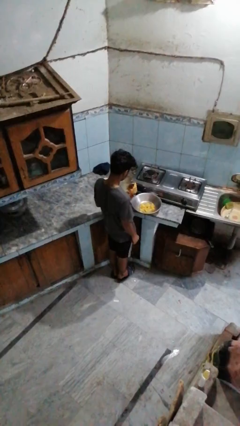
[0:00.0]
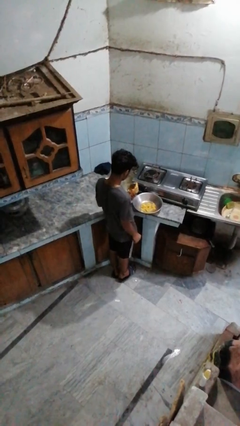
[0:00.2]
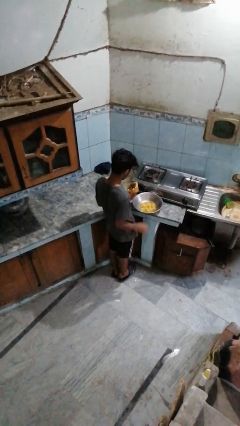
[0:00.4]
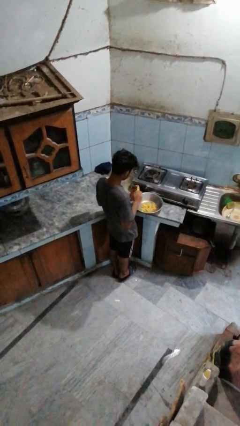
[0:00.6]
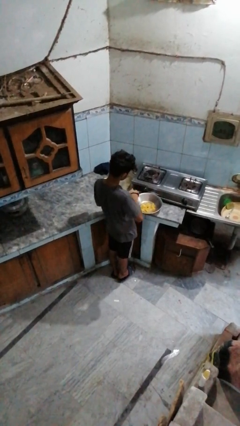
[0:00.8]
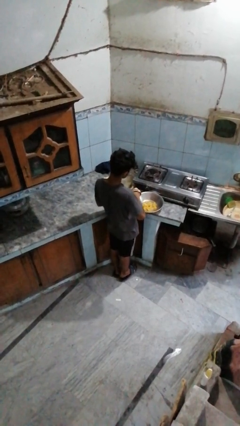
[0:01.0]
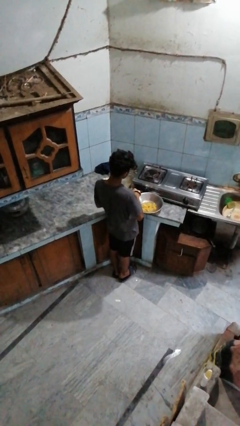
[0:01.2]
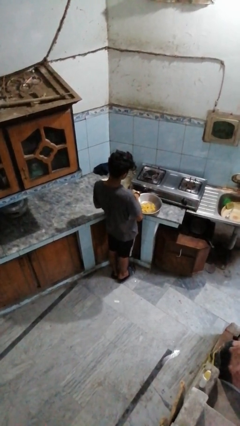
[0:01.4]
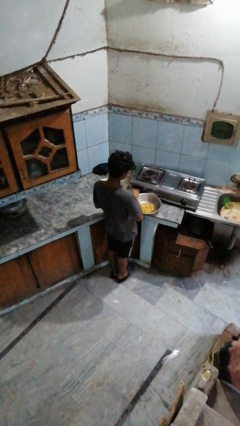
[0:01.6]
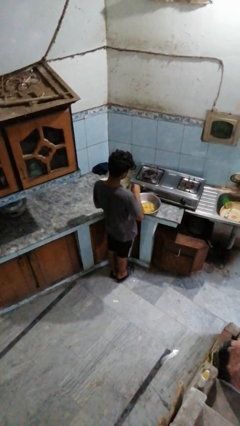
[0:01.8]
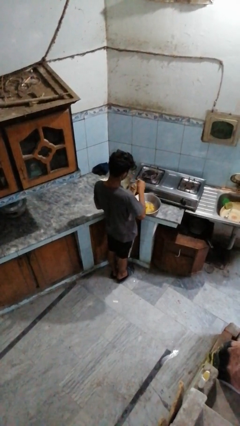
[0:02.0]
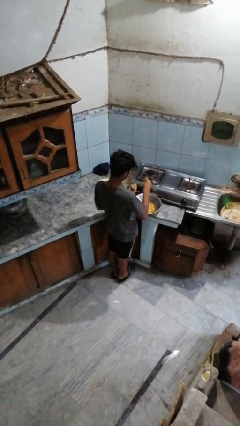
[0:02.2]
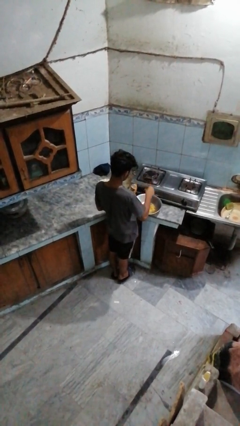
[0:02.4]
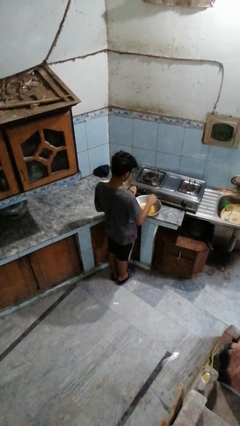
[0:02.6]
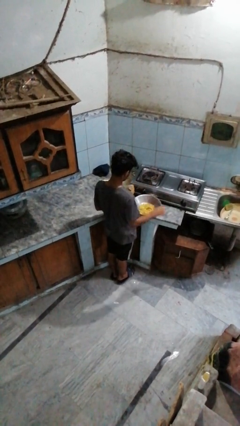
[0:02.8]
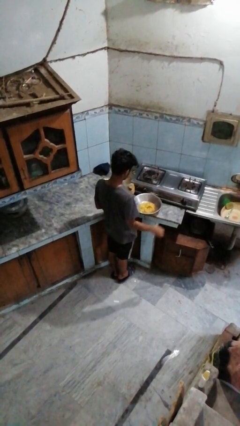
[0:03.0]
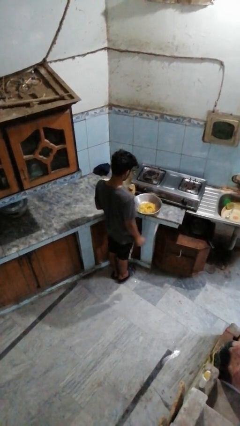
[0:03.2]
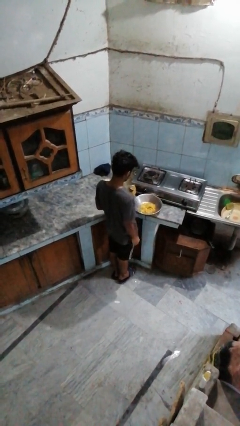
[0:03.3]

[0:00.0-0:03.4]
person pours into bowl

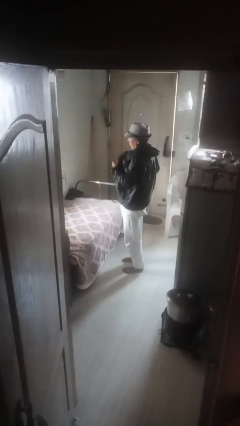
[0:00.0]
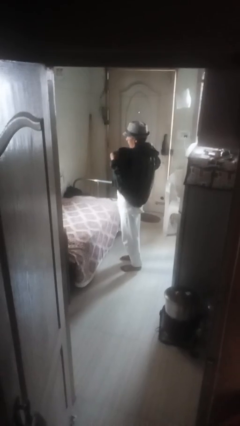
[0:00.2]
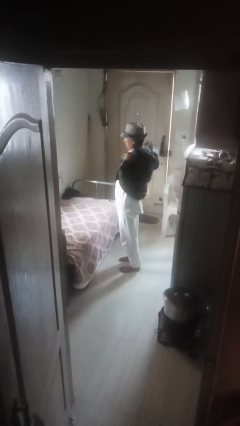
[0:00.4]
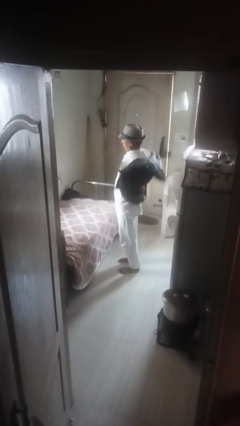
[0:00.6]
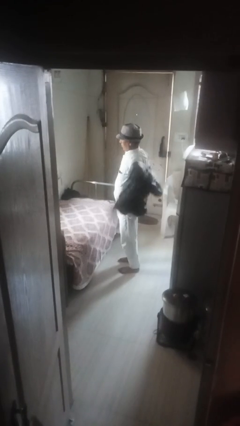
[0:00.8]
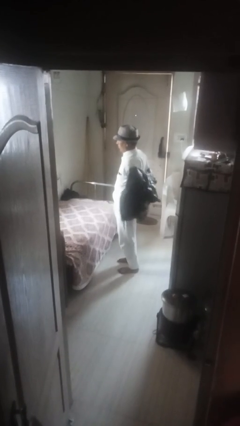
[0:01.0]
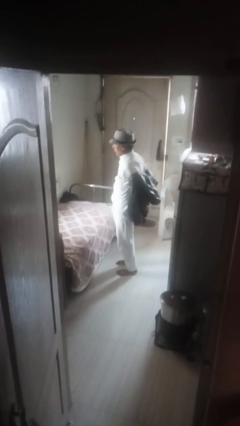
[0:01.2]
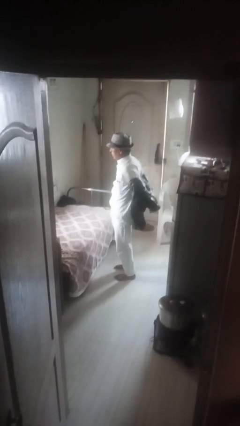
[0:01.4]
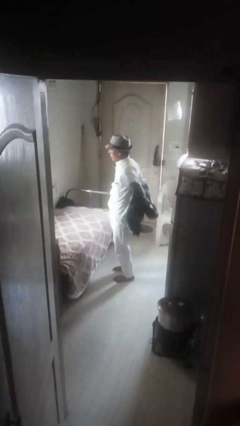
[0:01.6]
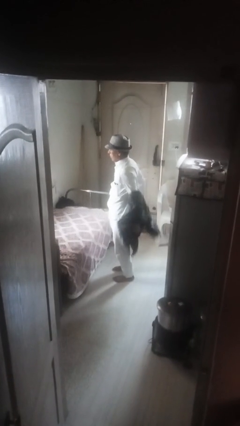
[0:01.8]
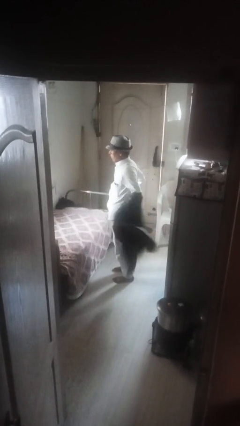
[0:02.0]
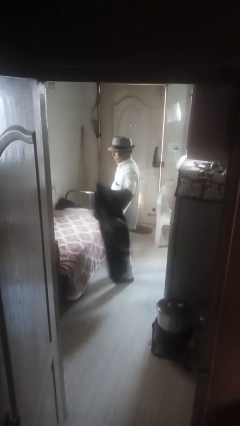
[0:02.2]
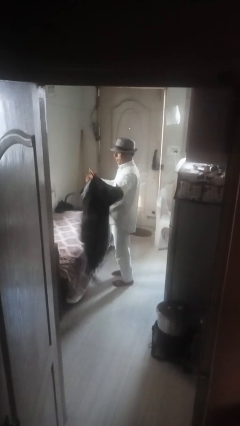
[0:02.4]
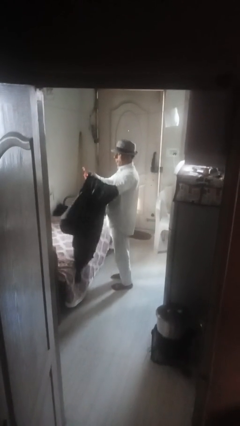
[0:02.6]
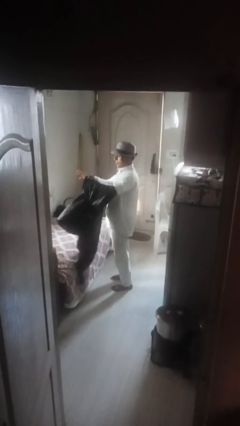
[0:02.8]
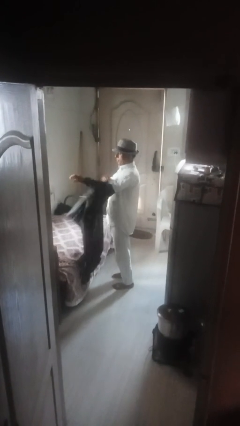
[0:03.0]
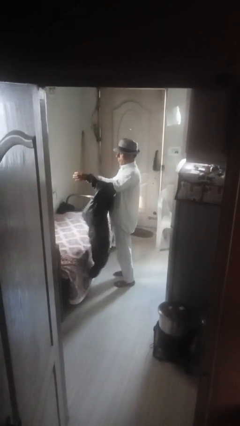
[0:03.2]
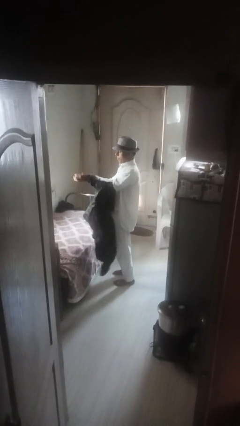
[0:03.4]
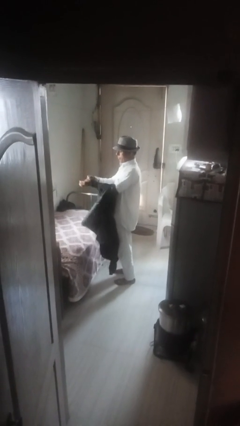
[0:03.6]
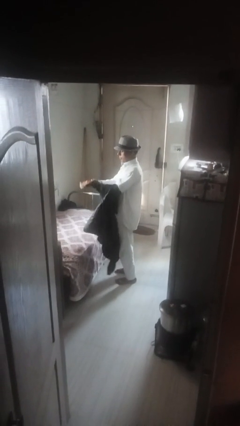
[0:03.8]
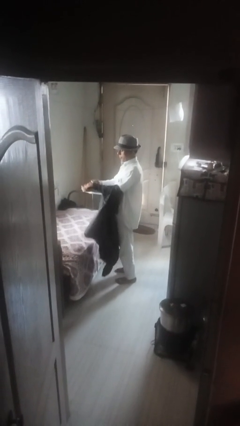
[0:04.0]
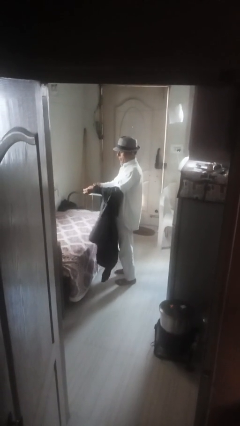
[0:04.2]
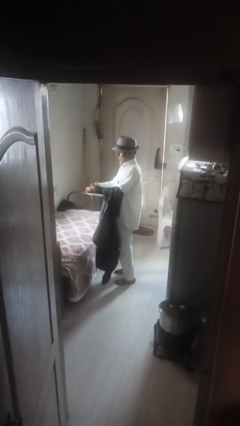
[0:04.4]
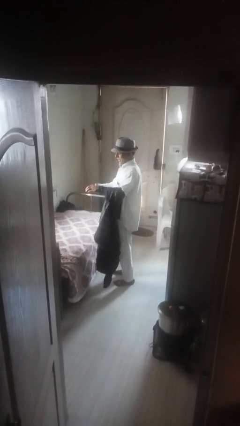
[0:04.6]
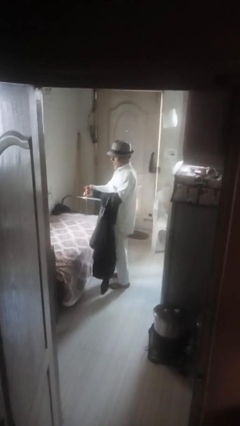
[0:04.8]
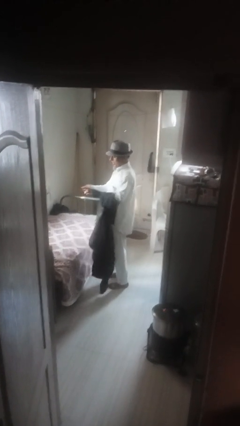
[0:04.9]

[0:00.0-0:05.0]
person takes off jacket

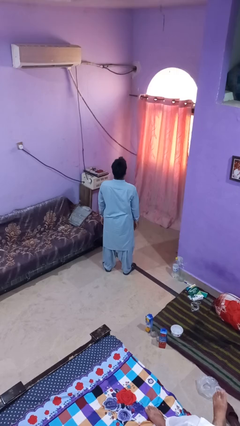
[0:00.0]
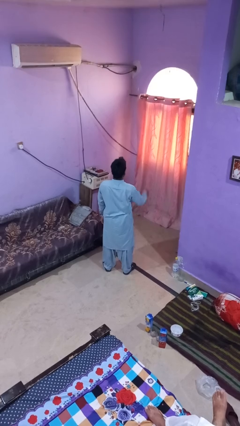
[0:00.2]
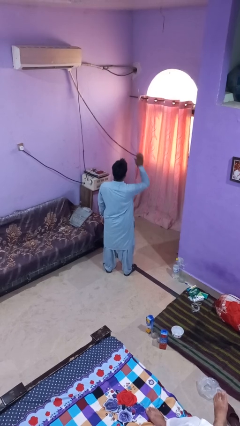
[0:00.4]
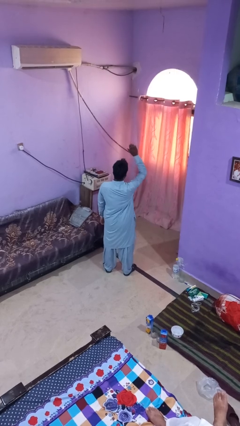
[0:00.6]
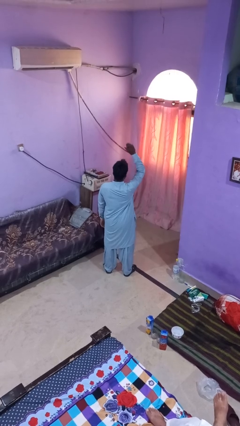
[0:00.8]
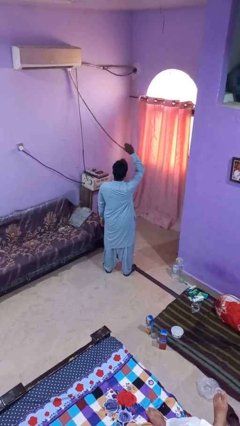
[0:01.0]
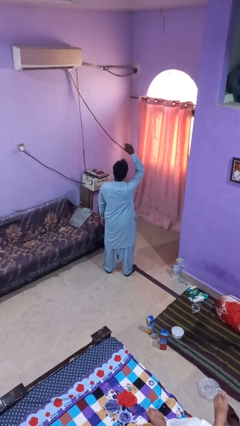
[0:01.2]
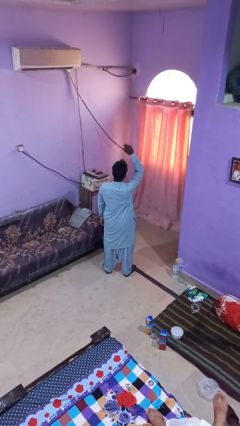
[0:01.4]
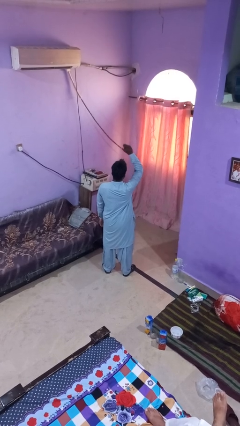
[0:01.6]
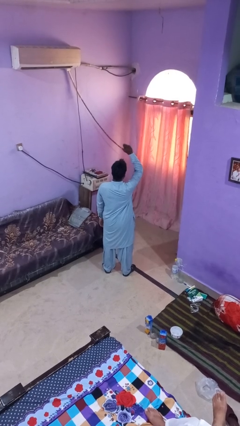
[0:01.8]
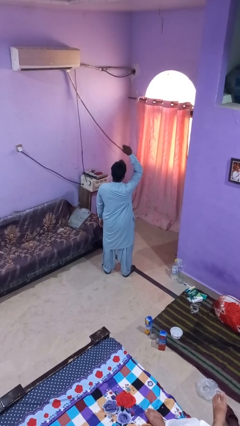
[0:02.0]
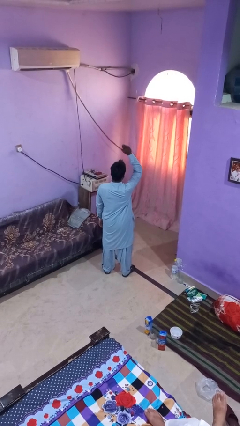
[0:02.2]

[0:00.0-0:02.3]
person gestures raise hand

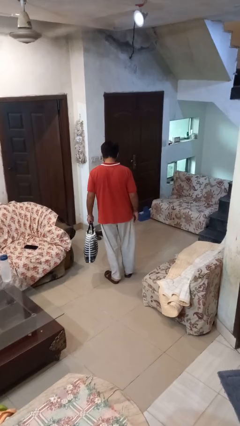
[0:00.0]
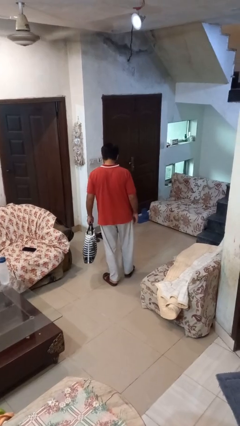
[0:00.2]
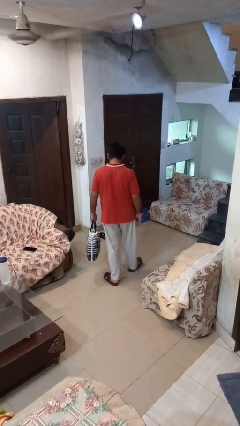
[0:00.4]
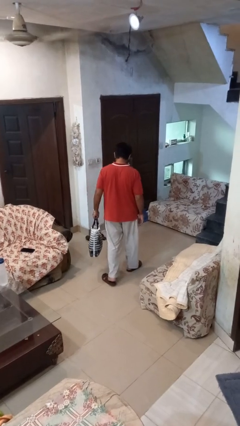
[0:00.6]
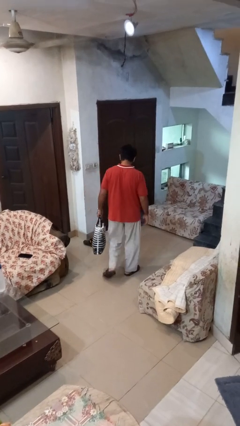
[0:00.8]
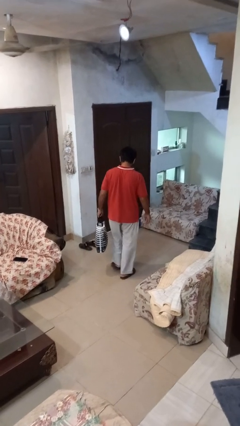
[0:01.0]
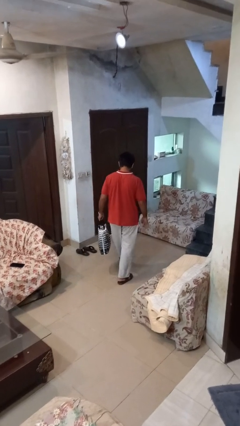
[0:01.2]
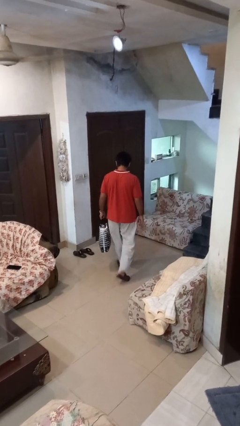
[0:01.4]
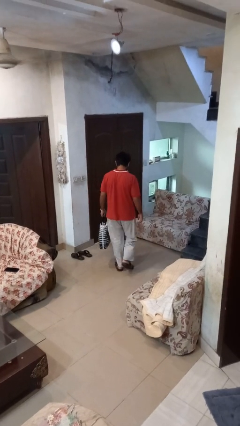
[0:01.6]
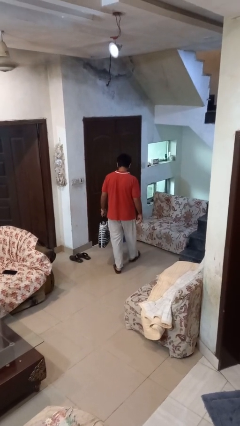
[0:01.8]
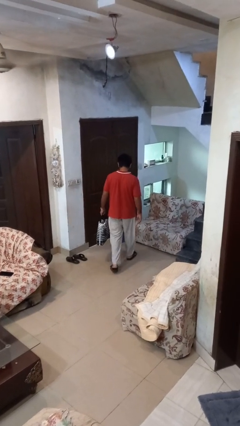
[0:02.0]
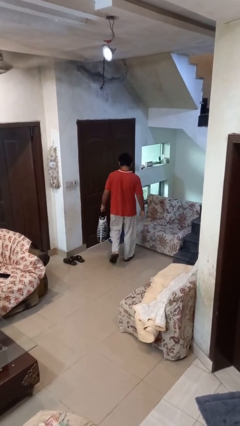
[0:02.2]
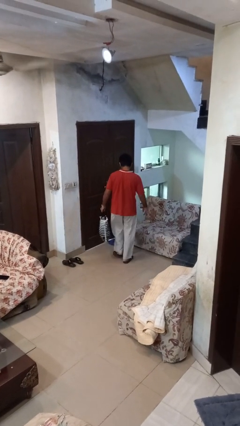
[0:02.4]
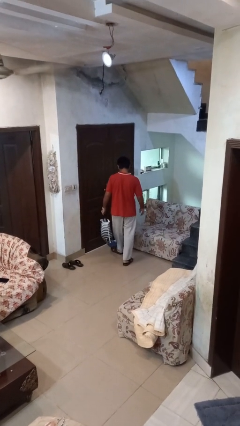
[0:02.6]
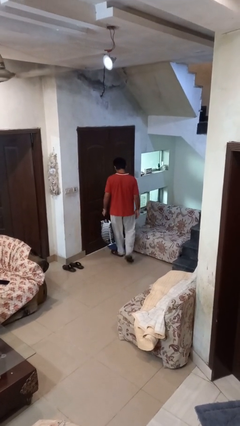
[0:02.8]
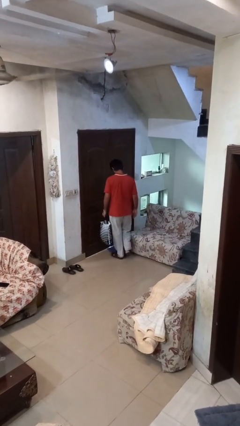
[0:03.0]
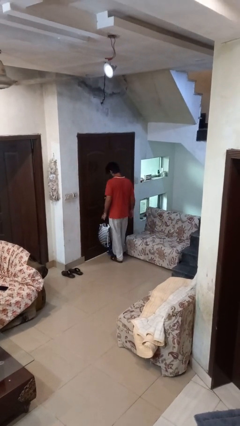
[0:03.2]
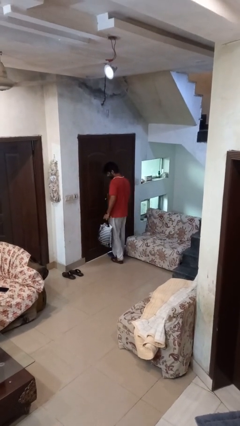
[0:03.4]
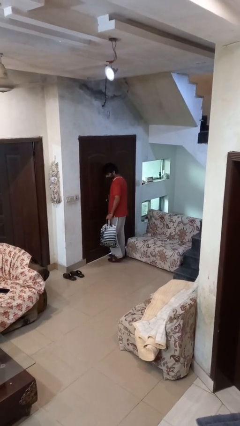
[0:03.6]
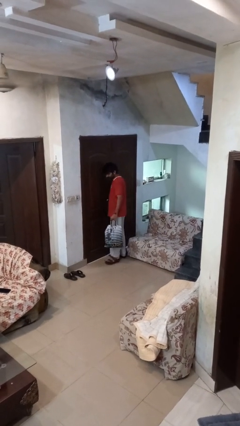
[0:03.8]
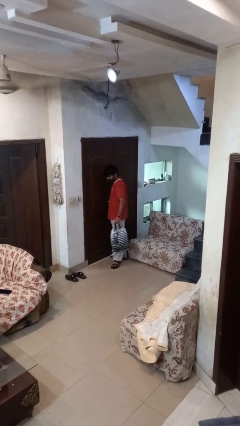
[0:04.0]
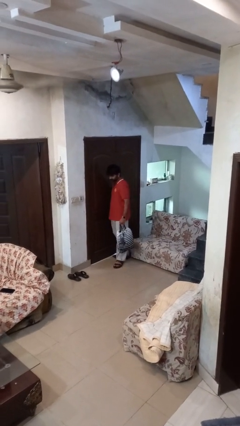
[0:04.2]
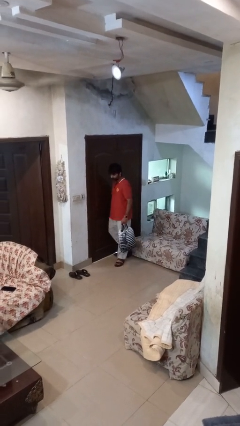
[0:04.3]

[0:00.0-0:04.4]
person carries groceries

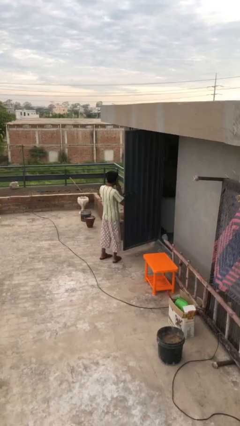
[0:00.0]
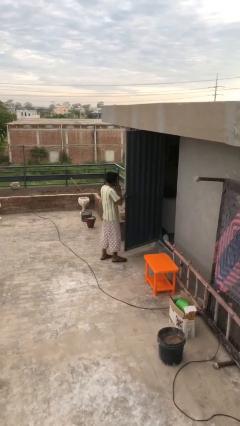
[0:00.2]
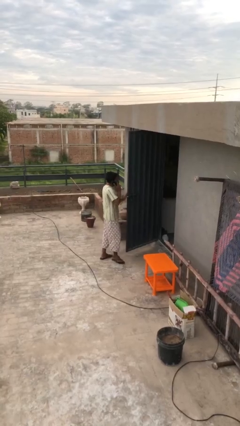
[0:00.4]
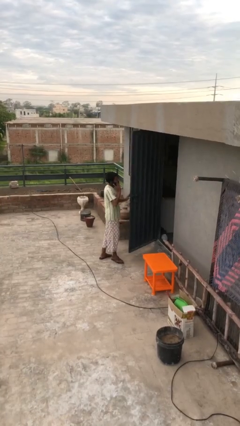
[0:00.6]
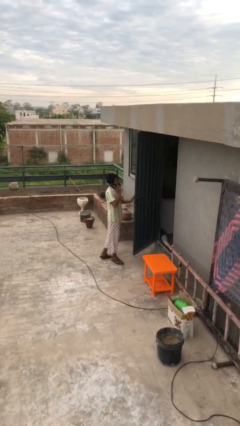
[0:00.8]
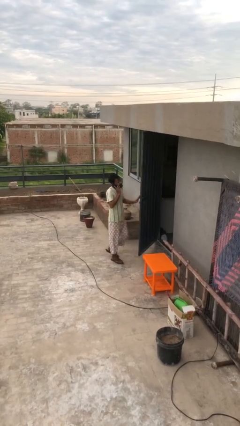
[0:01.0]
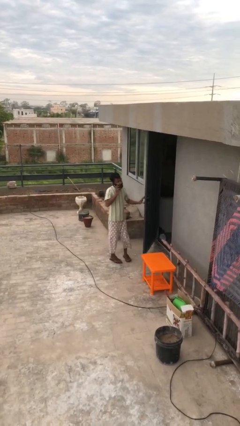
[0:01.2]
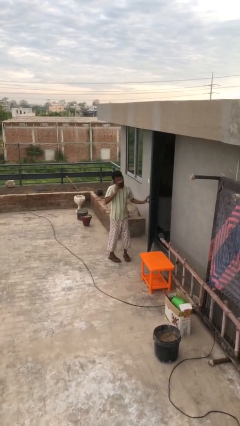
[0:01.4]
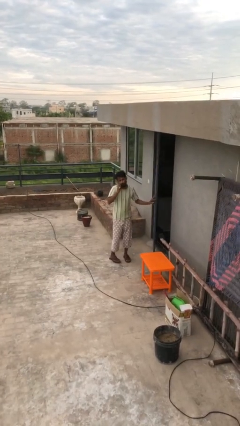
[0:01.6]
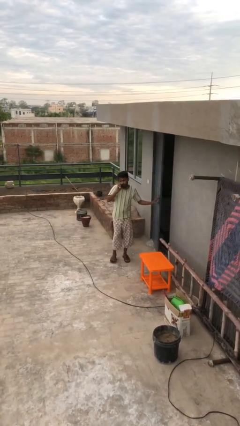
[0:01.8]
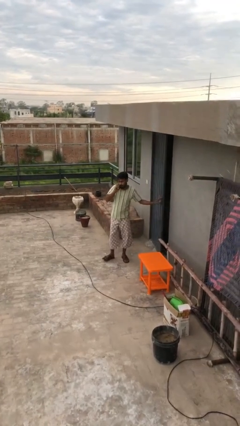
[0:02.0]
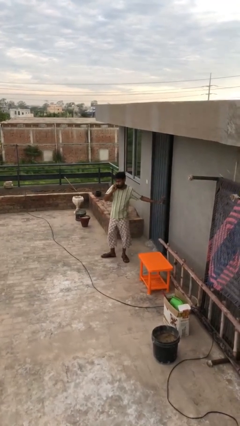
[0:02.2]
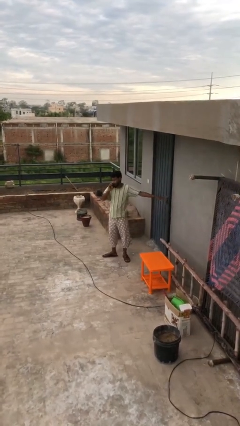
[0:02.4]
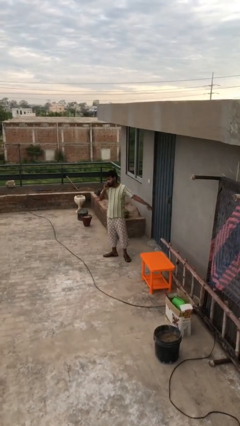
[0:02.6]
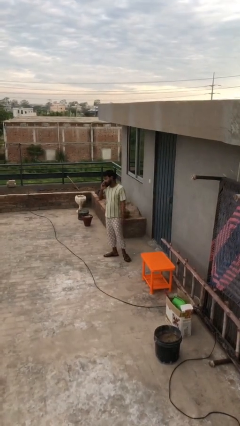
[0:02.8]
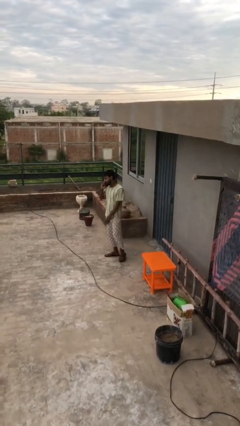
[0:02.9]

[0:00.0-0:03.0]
person closes facility door
